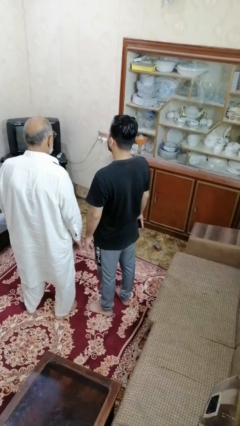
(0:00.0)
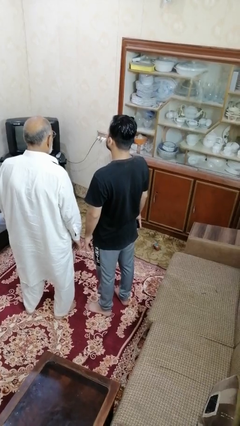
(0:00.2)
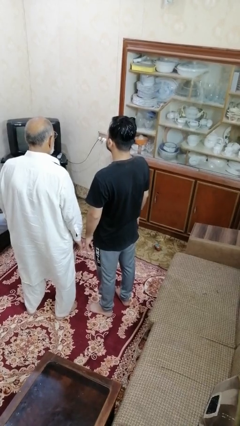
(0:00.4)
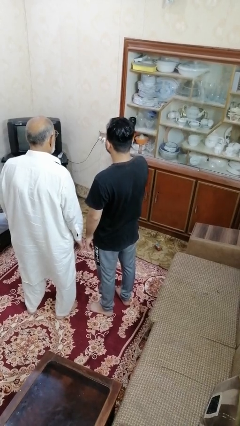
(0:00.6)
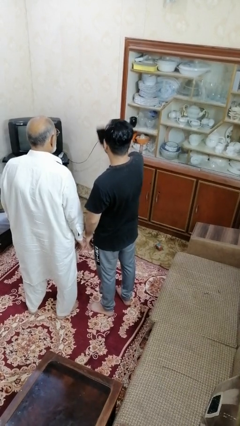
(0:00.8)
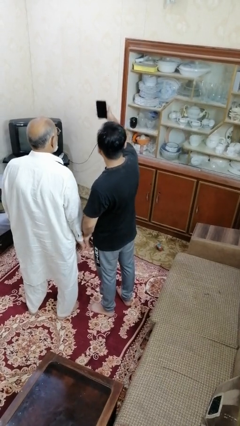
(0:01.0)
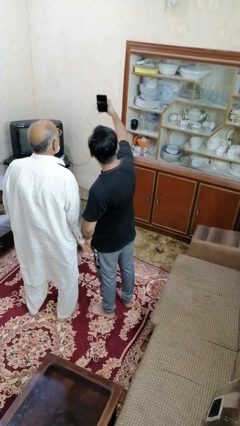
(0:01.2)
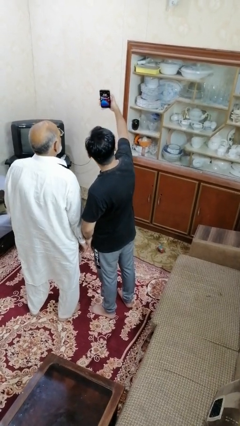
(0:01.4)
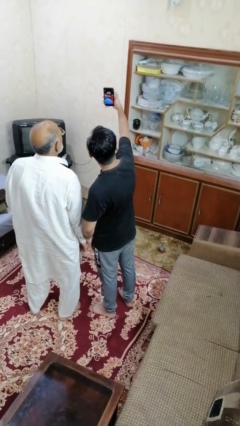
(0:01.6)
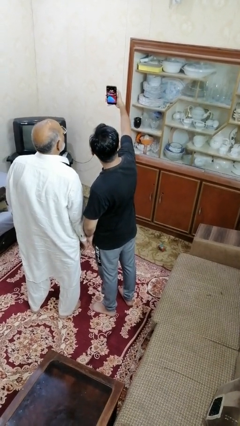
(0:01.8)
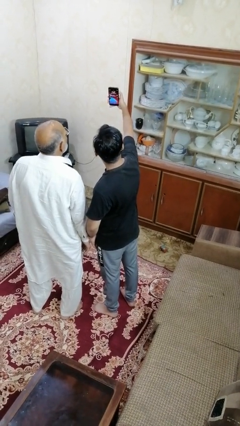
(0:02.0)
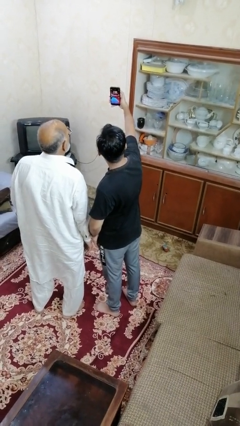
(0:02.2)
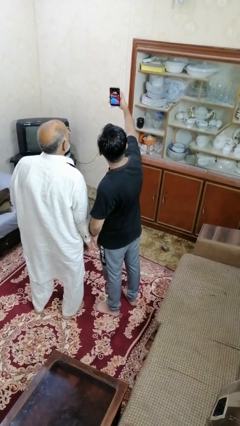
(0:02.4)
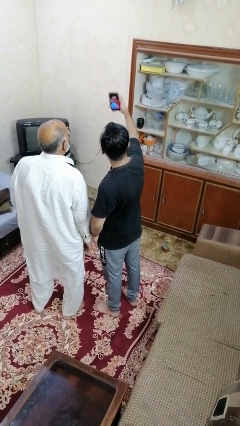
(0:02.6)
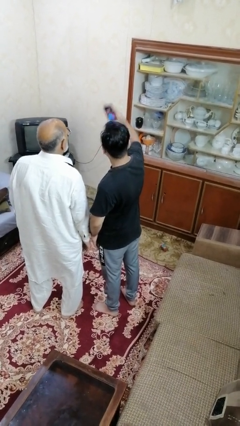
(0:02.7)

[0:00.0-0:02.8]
person takes selfie with person

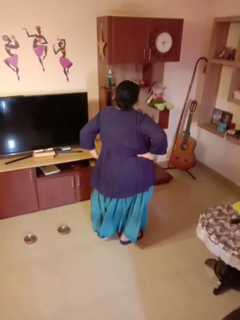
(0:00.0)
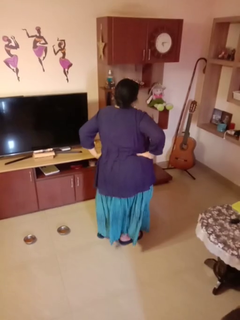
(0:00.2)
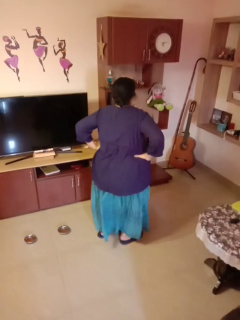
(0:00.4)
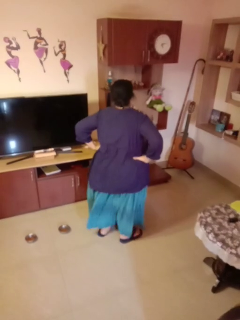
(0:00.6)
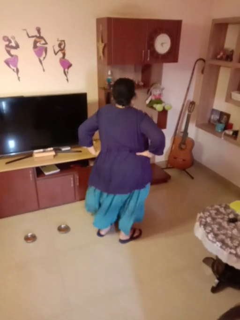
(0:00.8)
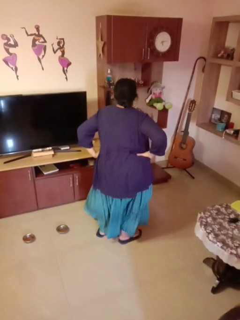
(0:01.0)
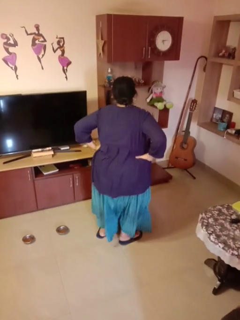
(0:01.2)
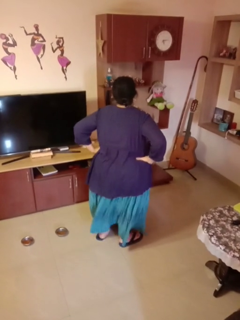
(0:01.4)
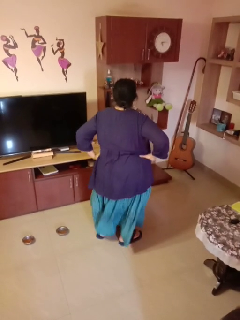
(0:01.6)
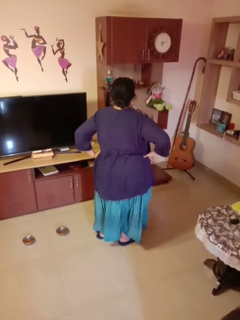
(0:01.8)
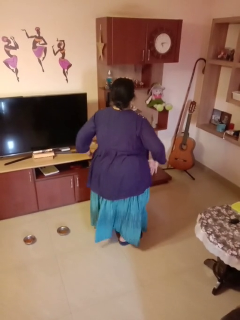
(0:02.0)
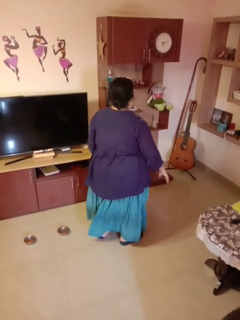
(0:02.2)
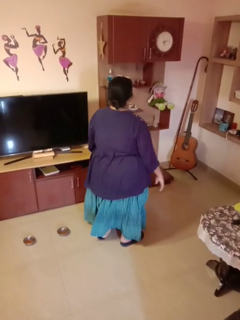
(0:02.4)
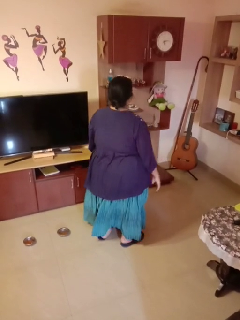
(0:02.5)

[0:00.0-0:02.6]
person wiggles hips

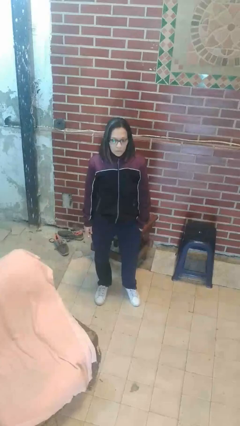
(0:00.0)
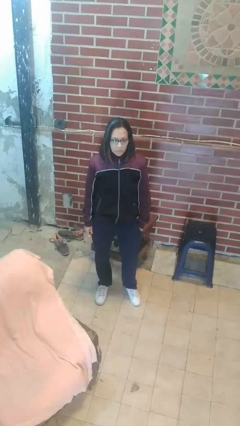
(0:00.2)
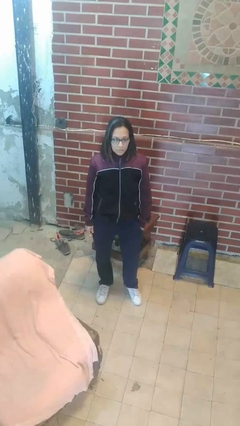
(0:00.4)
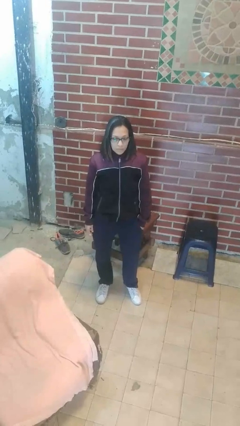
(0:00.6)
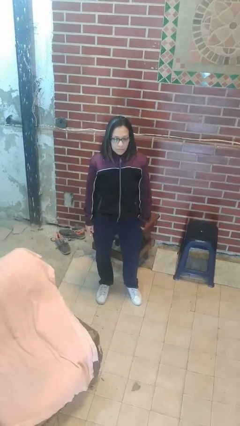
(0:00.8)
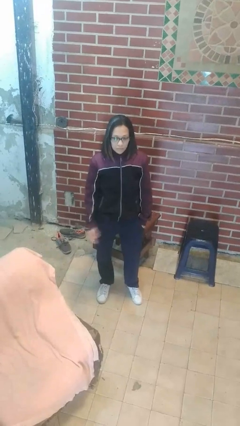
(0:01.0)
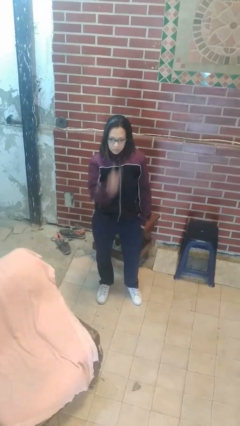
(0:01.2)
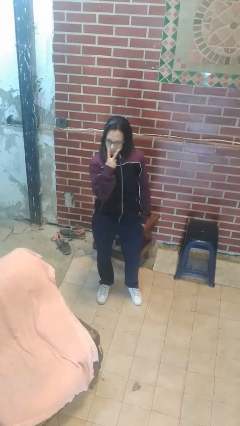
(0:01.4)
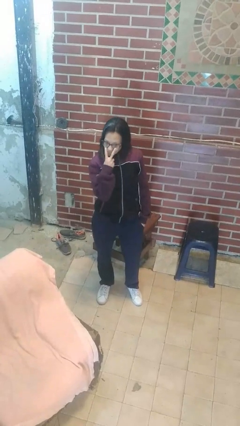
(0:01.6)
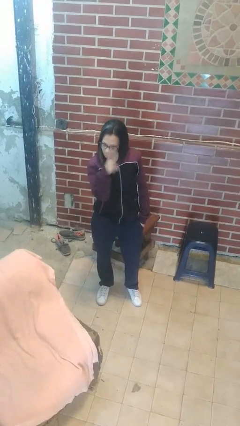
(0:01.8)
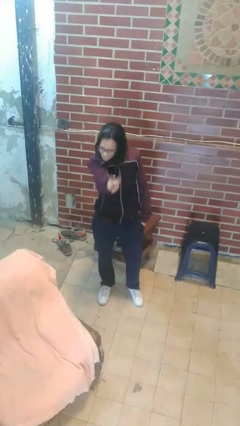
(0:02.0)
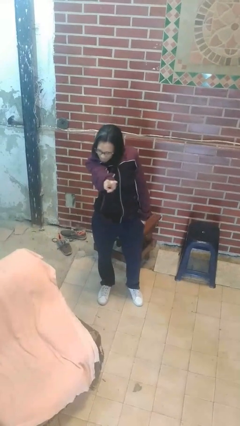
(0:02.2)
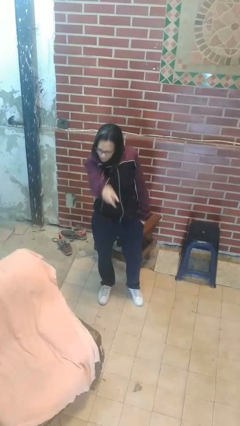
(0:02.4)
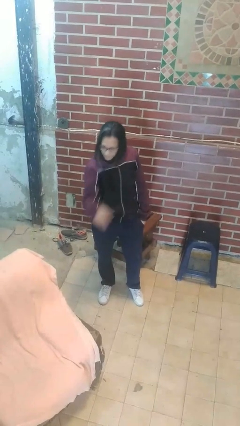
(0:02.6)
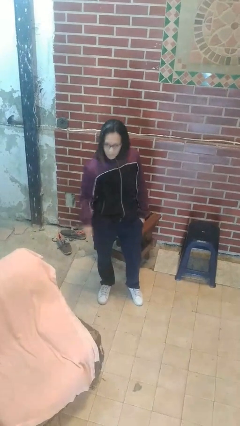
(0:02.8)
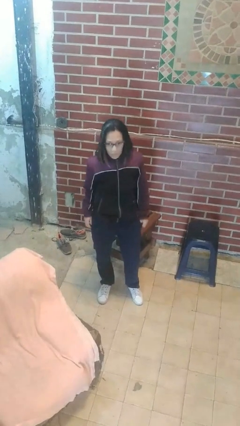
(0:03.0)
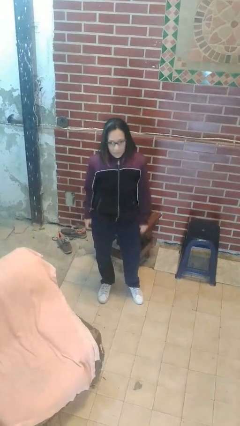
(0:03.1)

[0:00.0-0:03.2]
person gestures watch closely

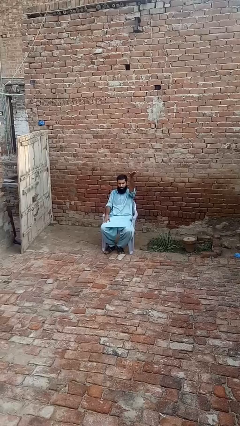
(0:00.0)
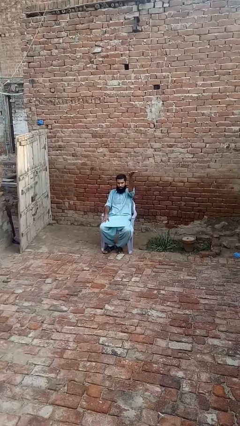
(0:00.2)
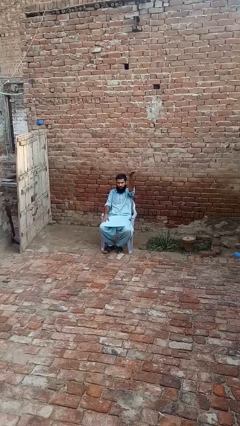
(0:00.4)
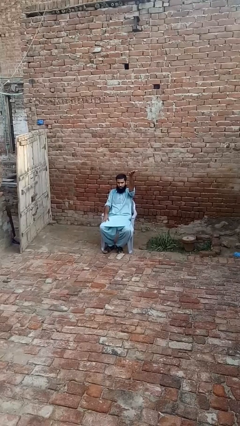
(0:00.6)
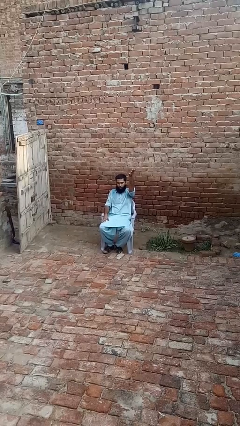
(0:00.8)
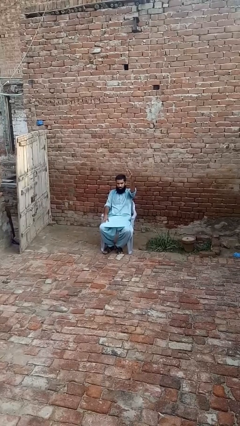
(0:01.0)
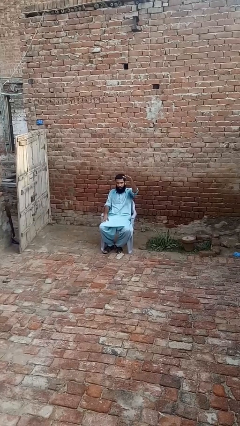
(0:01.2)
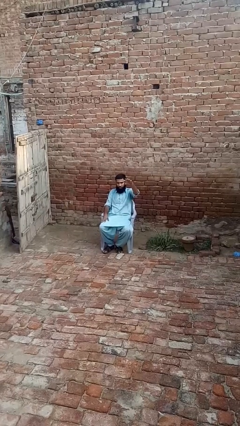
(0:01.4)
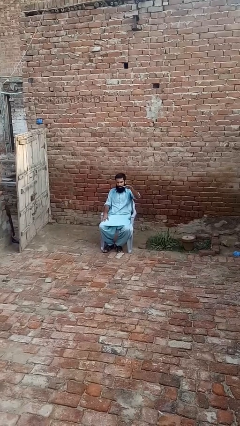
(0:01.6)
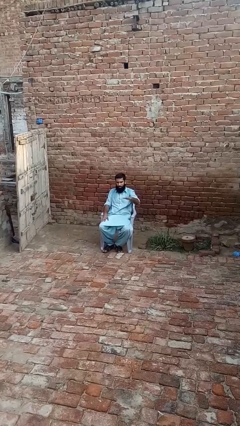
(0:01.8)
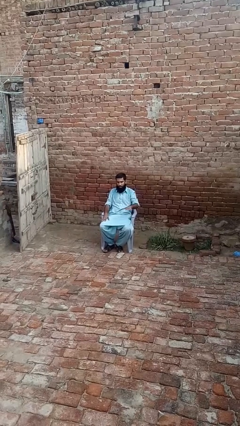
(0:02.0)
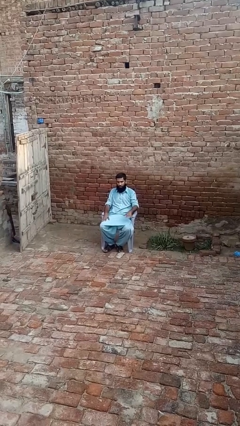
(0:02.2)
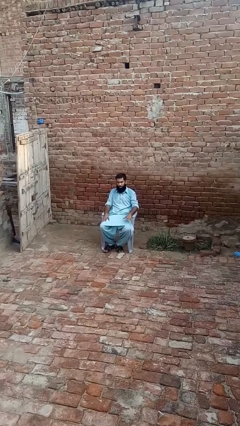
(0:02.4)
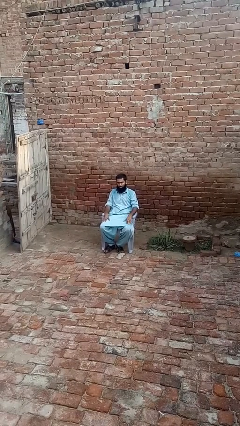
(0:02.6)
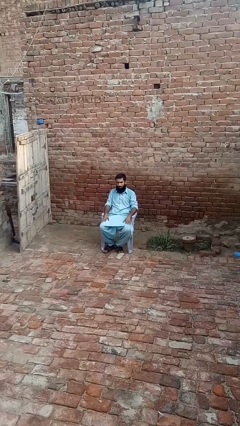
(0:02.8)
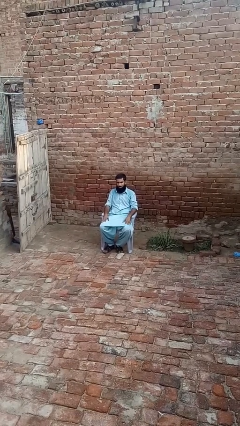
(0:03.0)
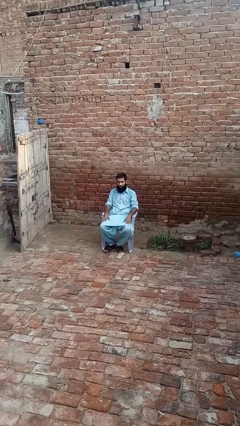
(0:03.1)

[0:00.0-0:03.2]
person gestures swipe down

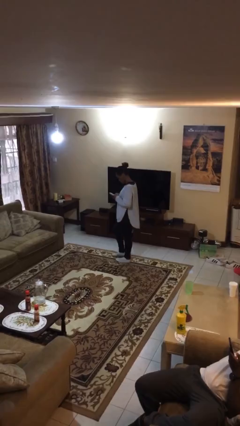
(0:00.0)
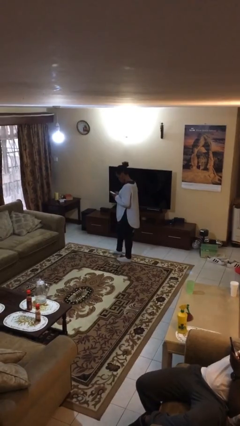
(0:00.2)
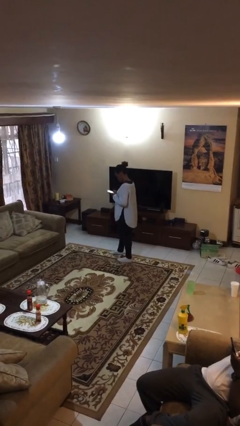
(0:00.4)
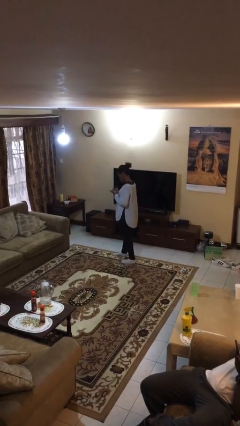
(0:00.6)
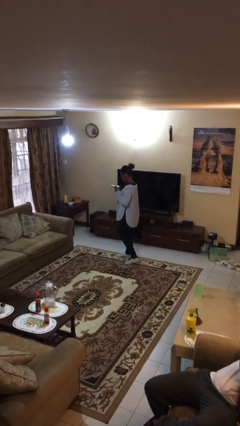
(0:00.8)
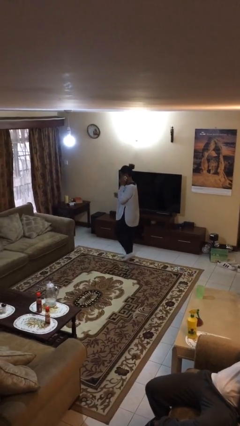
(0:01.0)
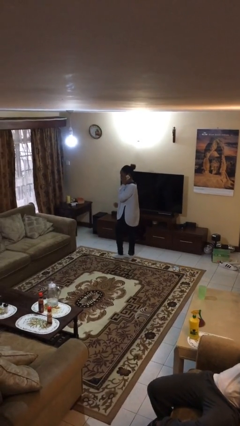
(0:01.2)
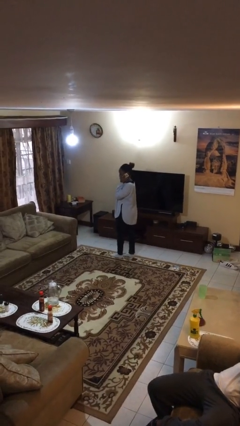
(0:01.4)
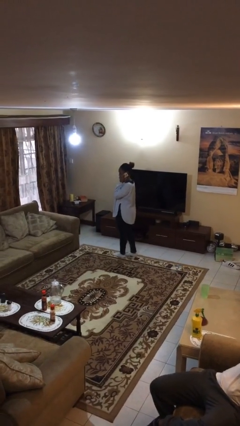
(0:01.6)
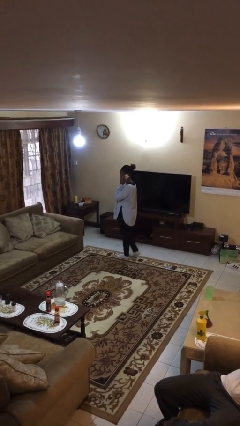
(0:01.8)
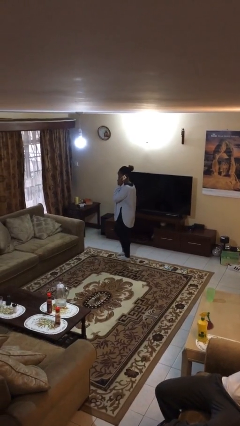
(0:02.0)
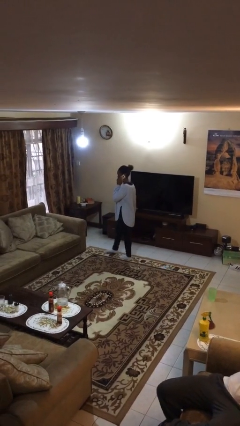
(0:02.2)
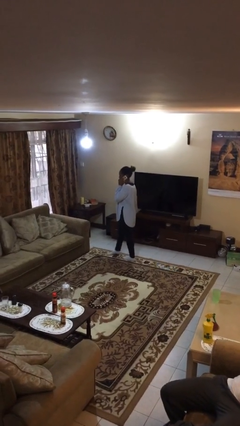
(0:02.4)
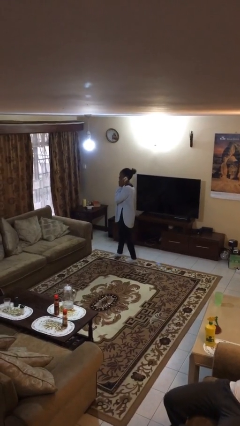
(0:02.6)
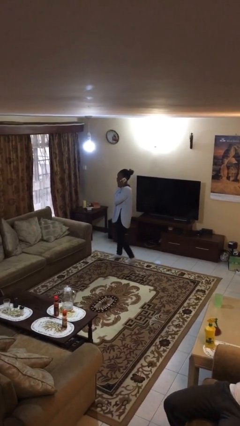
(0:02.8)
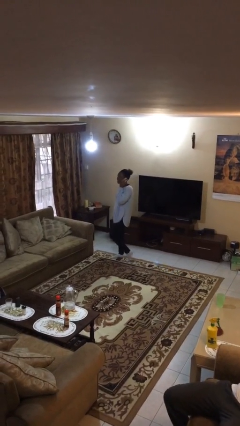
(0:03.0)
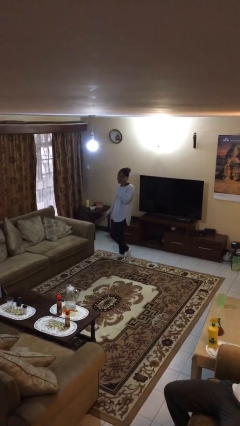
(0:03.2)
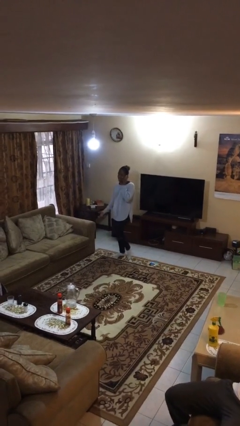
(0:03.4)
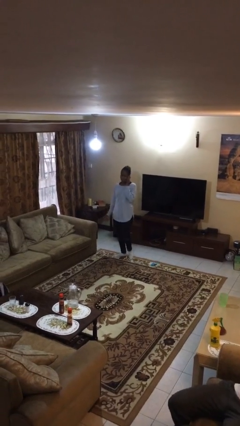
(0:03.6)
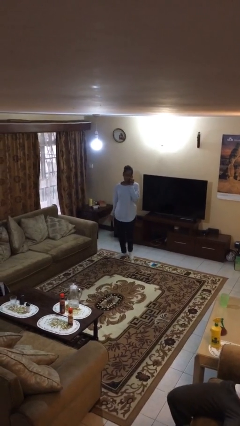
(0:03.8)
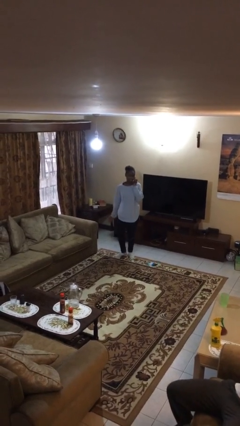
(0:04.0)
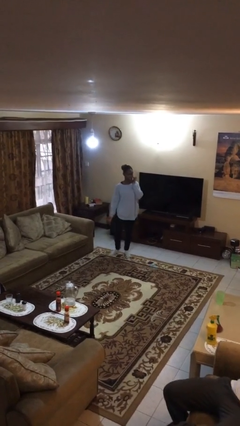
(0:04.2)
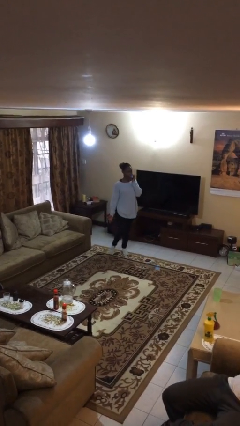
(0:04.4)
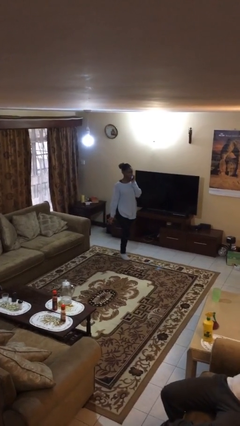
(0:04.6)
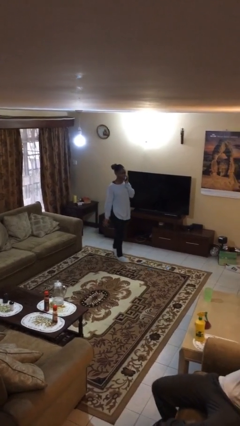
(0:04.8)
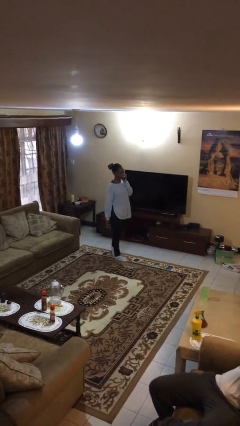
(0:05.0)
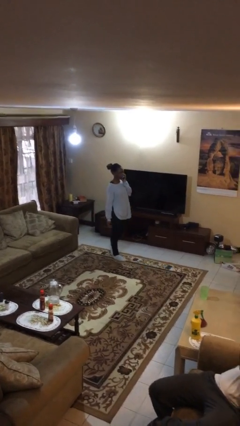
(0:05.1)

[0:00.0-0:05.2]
person talks on phone

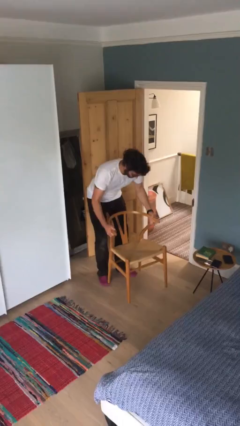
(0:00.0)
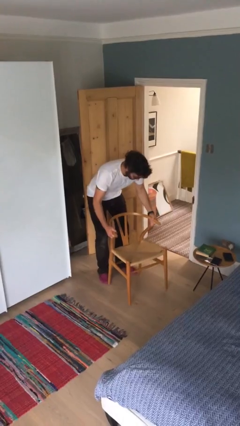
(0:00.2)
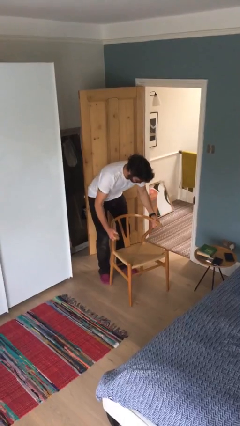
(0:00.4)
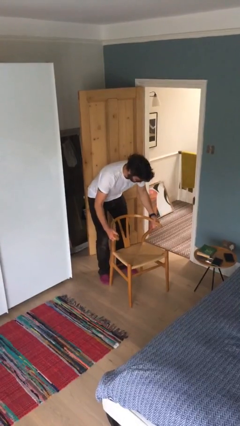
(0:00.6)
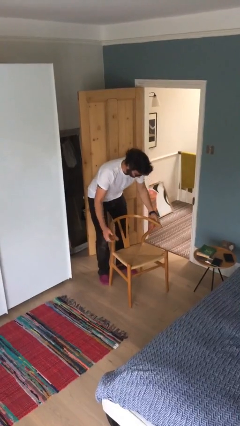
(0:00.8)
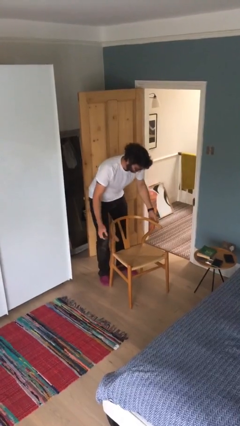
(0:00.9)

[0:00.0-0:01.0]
person puts down object on floor

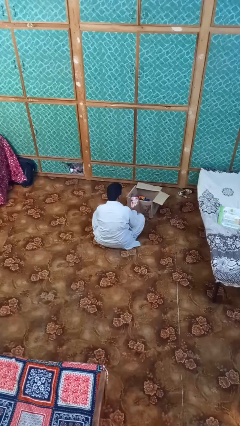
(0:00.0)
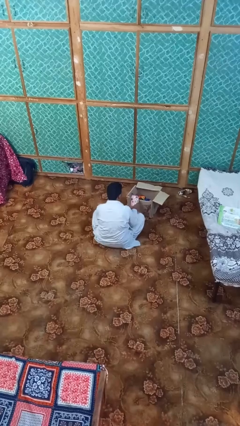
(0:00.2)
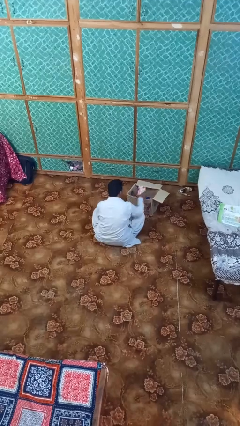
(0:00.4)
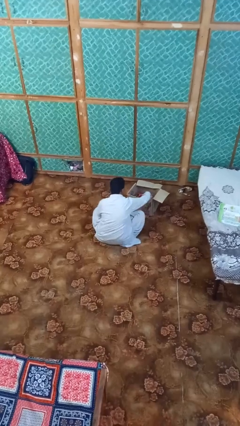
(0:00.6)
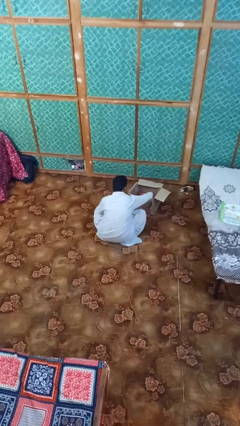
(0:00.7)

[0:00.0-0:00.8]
person puts object into box
